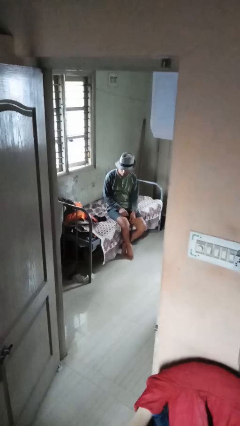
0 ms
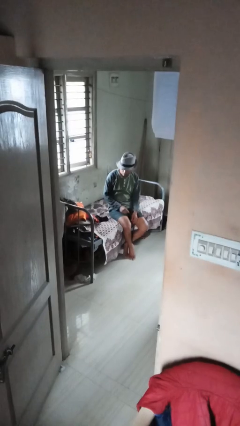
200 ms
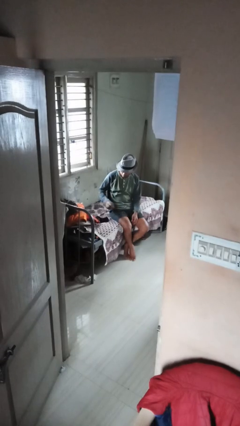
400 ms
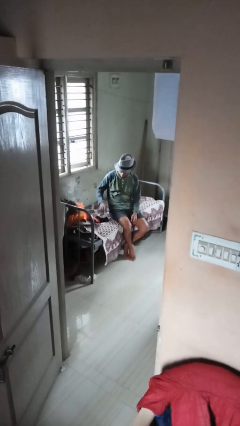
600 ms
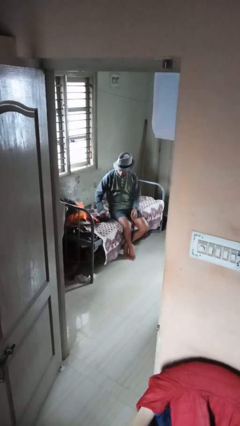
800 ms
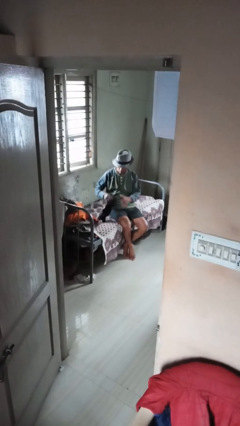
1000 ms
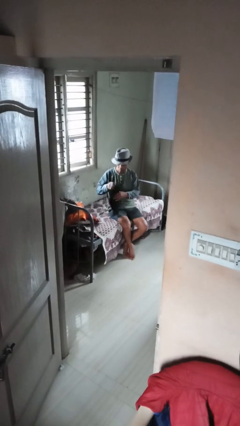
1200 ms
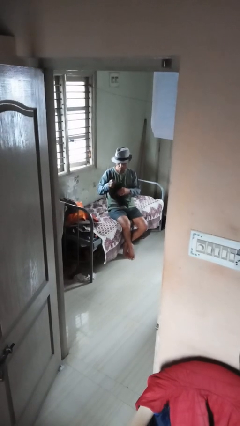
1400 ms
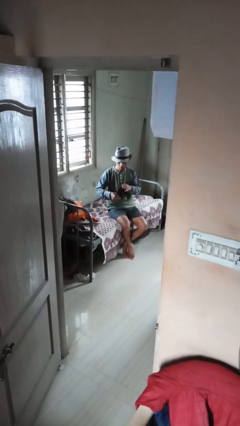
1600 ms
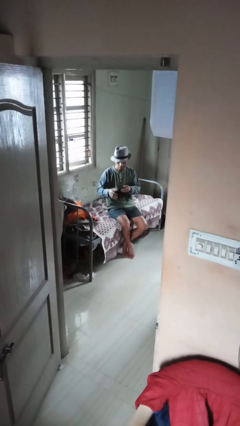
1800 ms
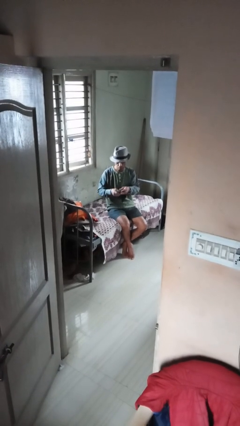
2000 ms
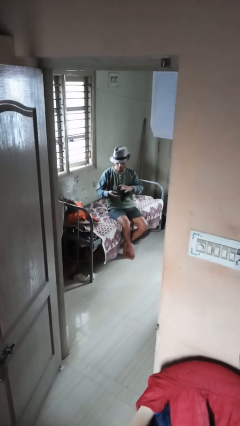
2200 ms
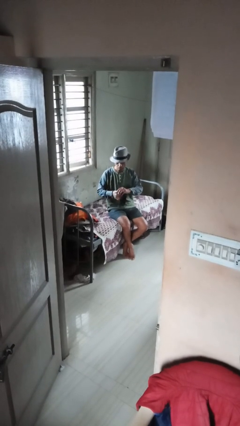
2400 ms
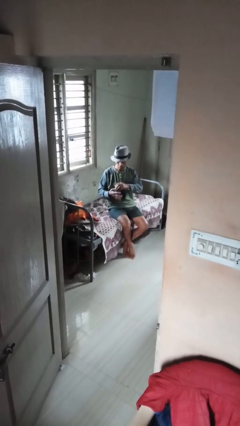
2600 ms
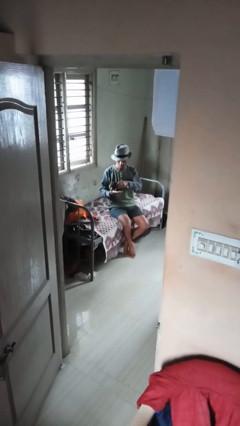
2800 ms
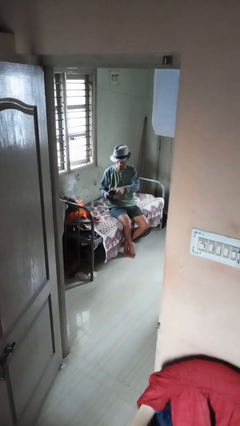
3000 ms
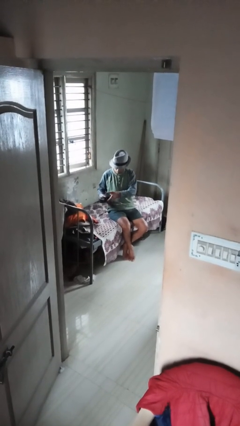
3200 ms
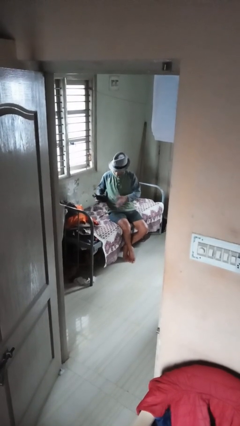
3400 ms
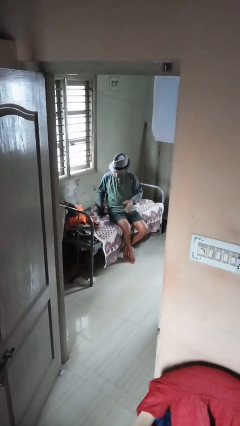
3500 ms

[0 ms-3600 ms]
person folds socks

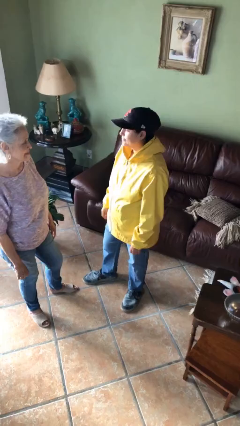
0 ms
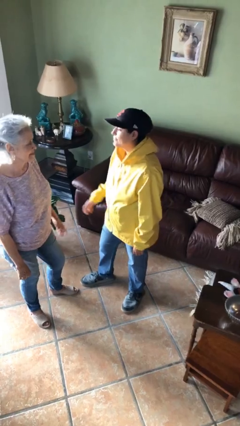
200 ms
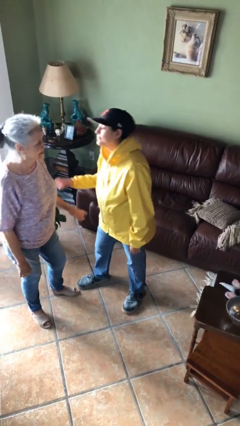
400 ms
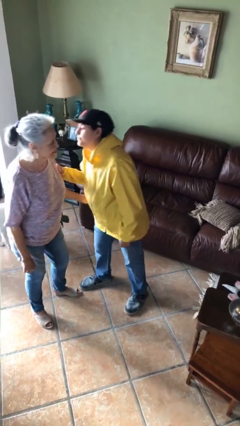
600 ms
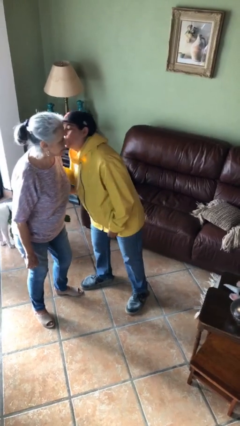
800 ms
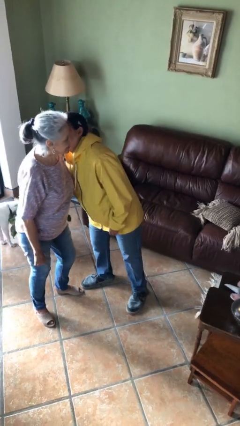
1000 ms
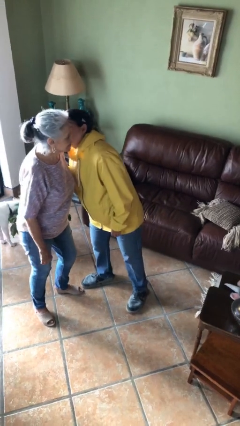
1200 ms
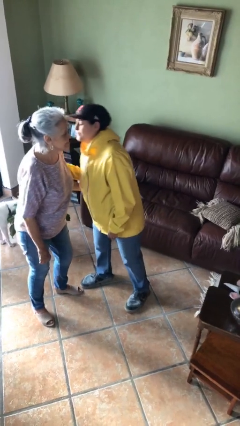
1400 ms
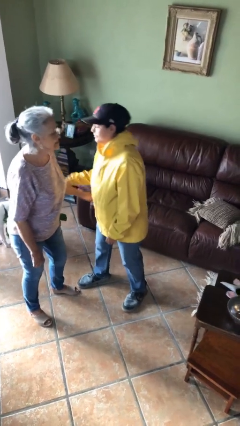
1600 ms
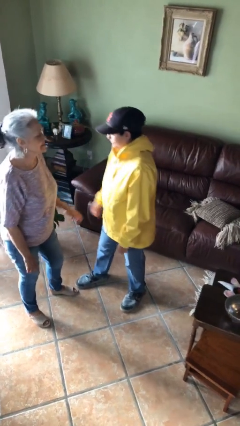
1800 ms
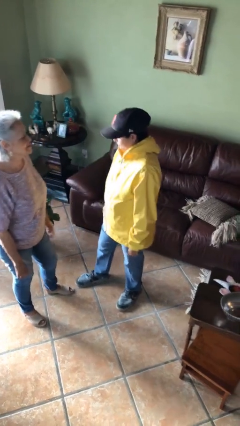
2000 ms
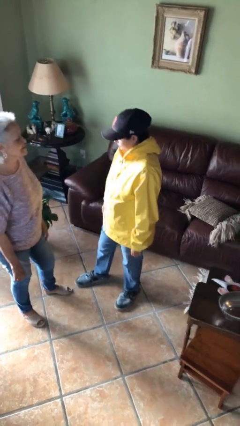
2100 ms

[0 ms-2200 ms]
person kisses cheek of person

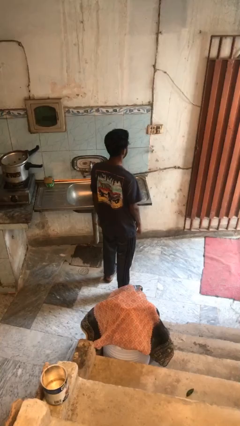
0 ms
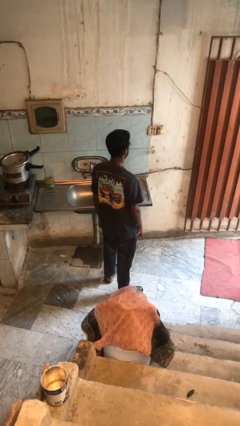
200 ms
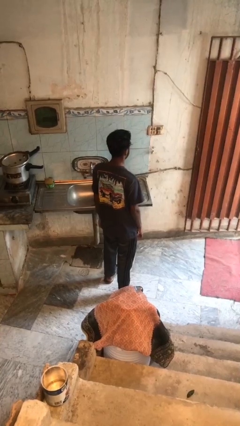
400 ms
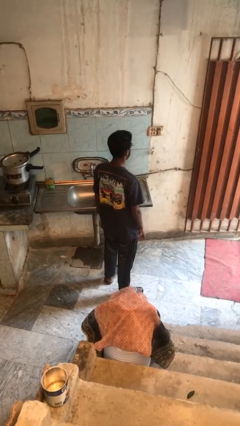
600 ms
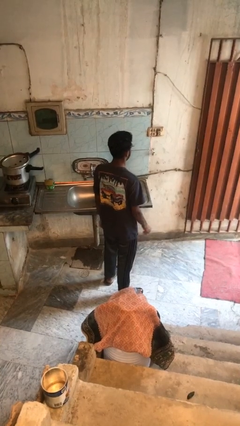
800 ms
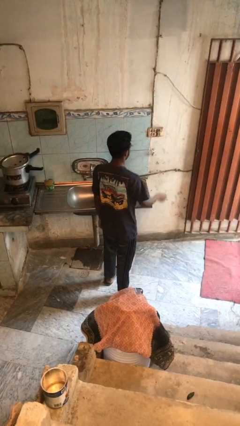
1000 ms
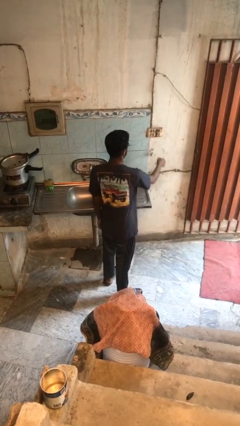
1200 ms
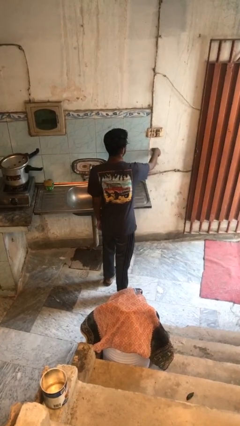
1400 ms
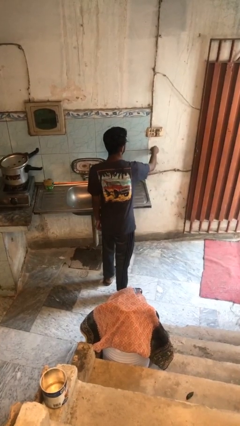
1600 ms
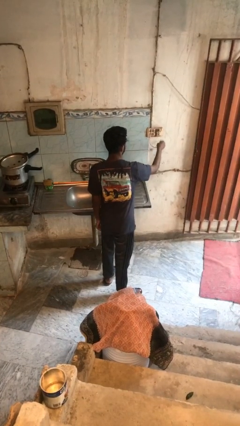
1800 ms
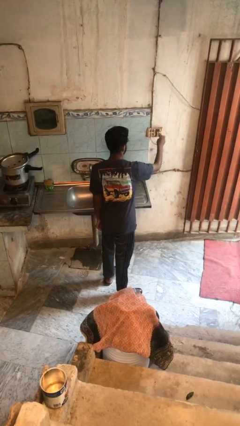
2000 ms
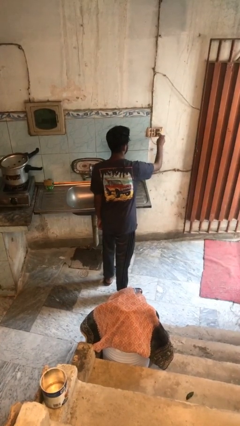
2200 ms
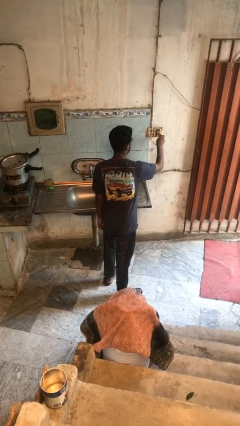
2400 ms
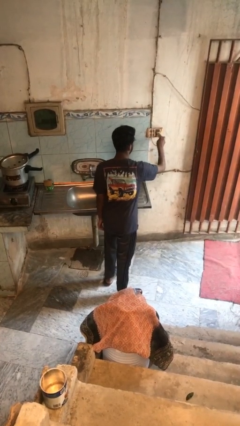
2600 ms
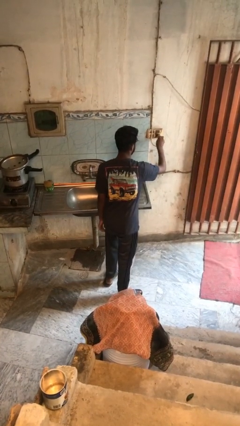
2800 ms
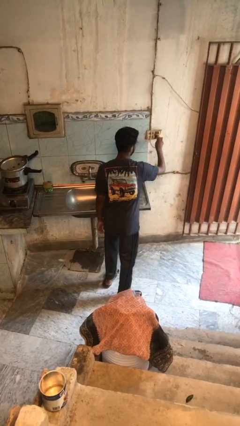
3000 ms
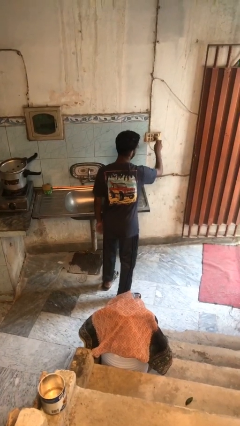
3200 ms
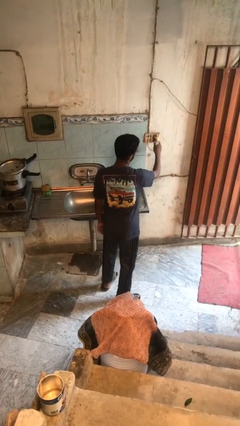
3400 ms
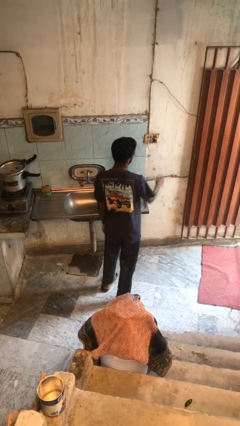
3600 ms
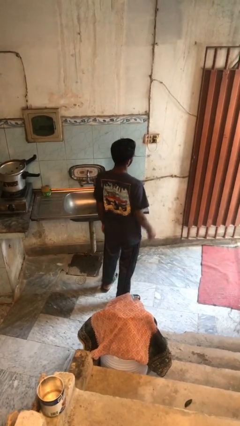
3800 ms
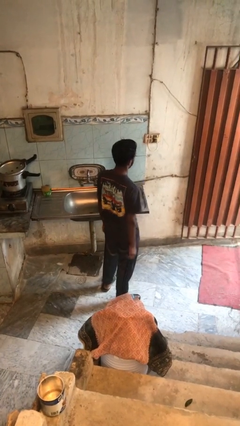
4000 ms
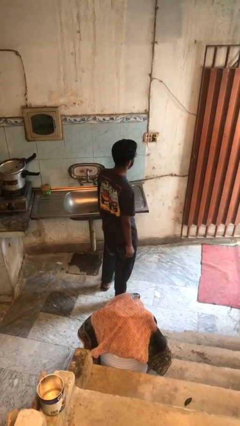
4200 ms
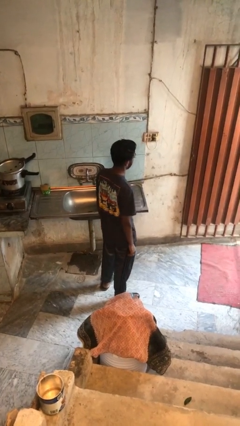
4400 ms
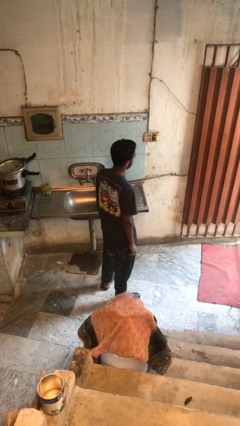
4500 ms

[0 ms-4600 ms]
person plugs into electrical socket

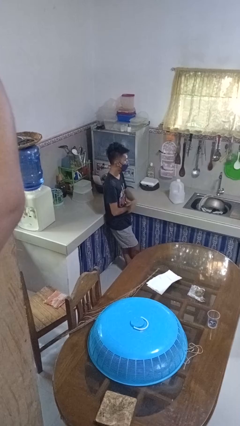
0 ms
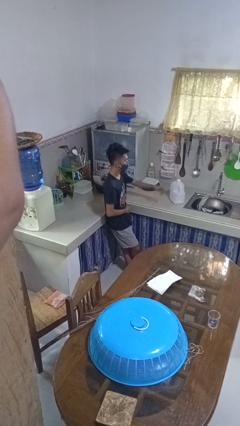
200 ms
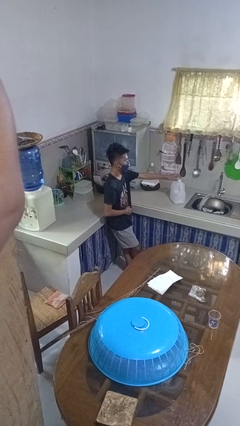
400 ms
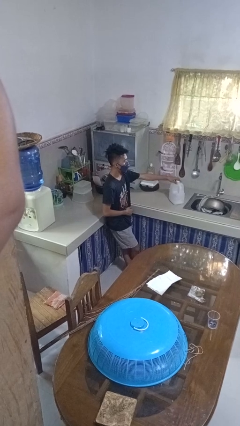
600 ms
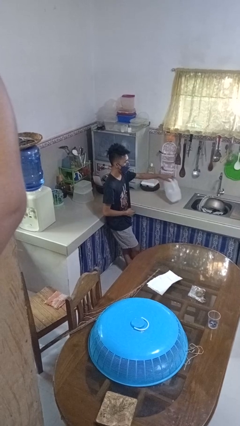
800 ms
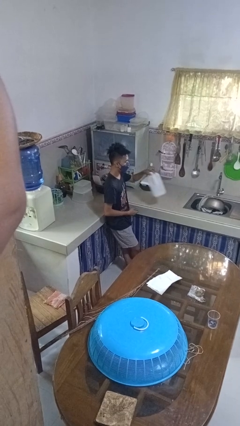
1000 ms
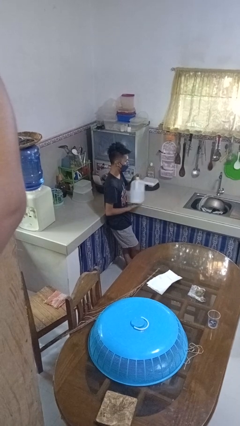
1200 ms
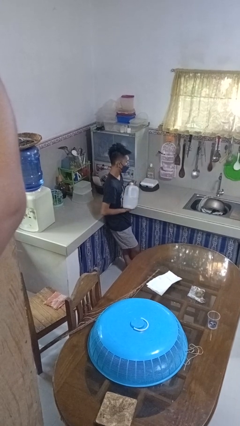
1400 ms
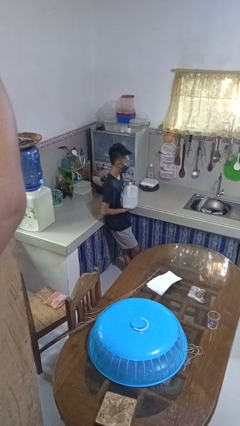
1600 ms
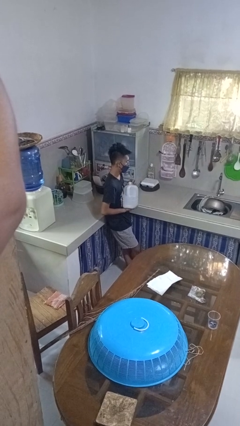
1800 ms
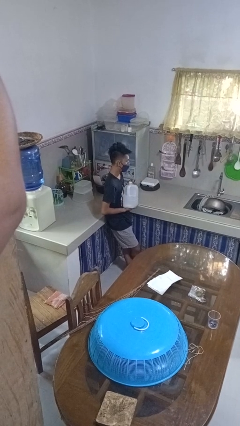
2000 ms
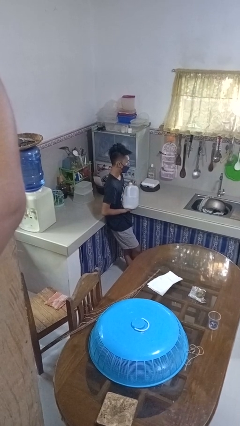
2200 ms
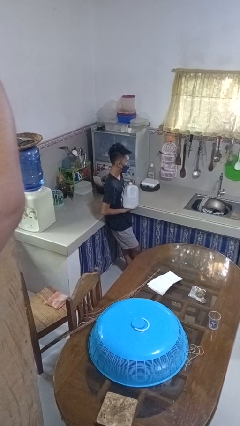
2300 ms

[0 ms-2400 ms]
person picks up object from countertop

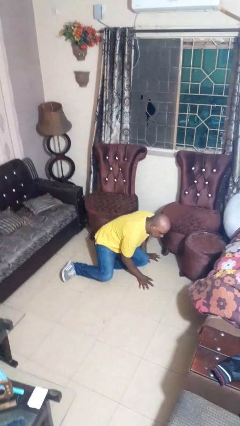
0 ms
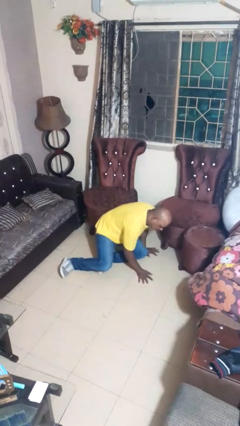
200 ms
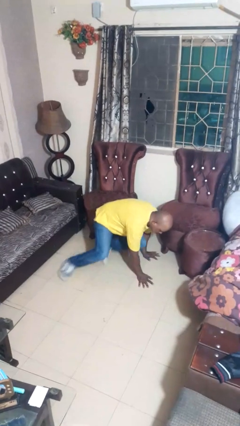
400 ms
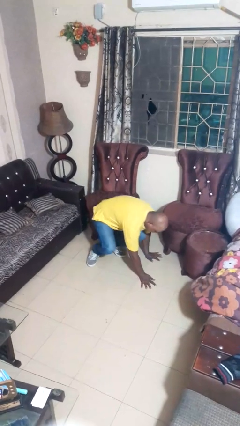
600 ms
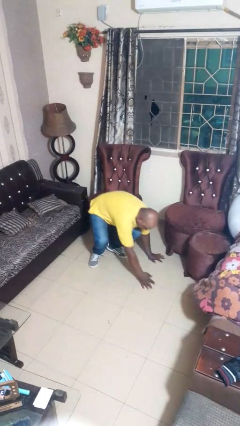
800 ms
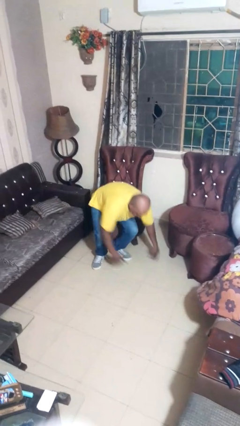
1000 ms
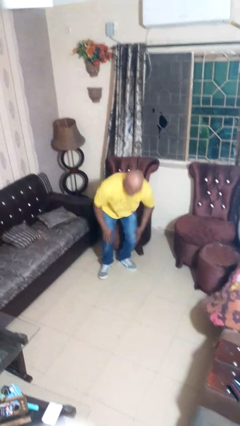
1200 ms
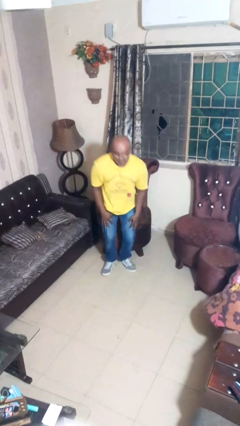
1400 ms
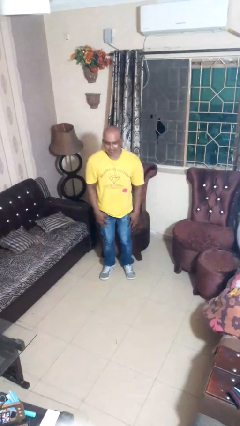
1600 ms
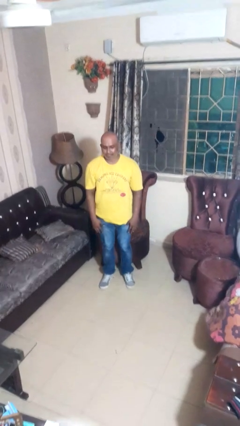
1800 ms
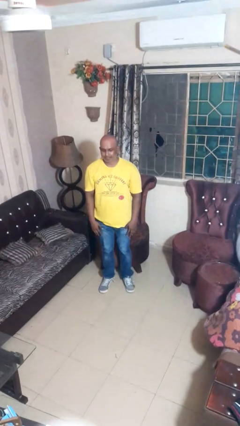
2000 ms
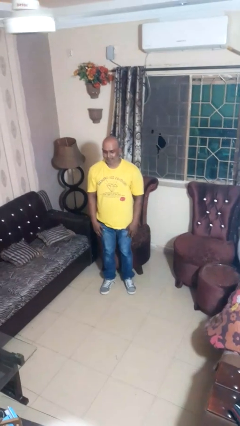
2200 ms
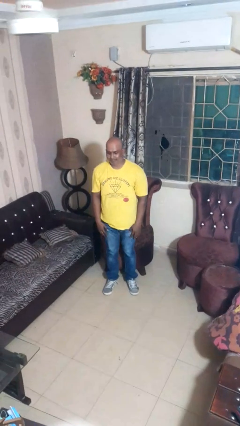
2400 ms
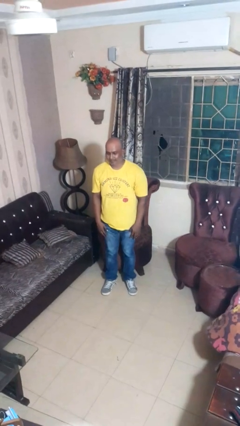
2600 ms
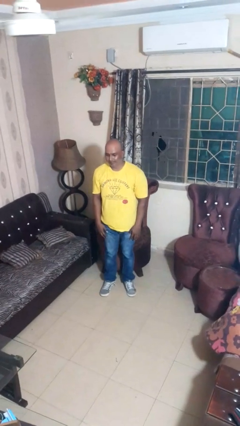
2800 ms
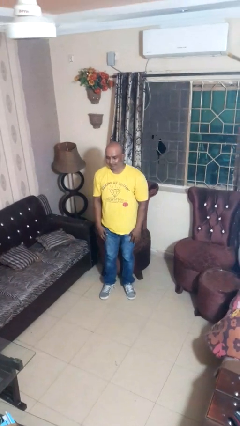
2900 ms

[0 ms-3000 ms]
person stands up from floor

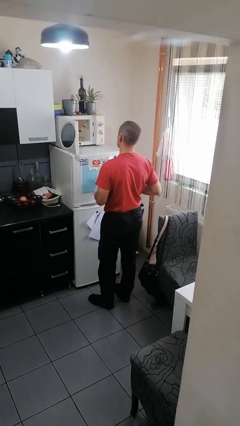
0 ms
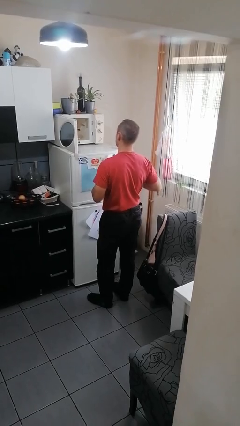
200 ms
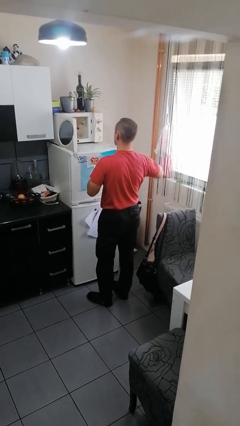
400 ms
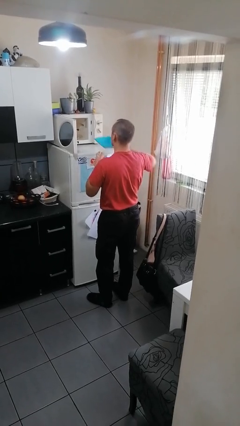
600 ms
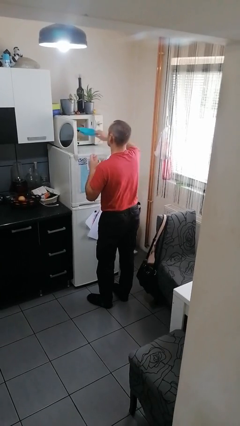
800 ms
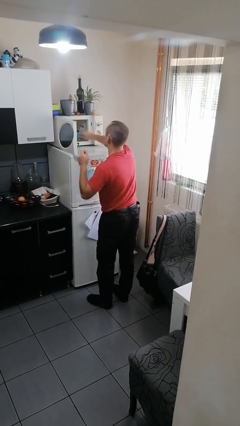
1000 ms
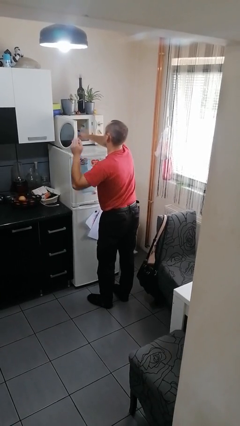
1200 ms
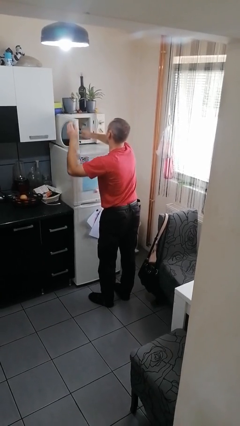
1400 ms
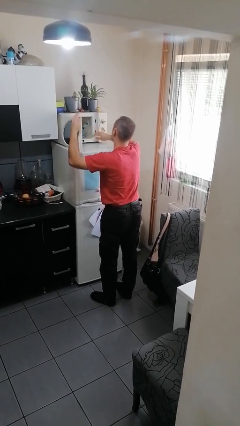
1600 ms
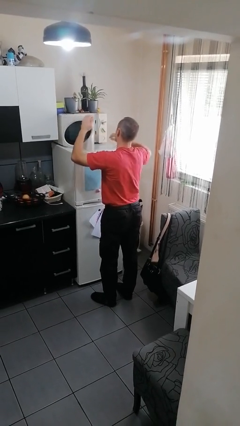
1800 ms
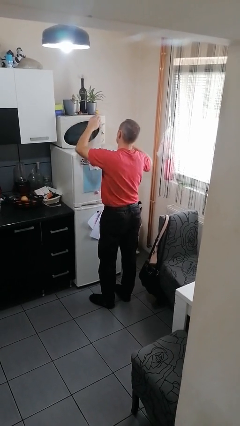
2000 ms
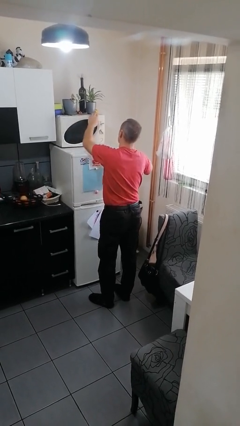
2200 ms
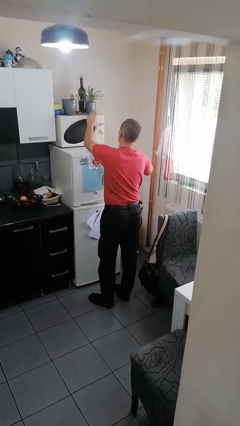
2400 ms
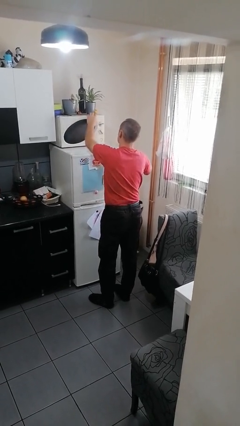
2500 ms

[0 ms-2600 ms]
person puts object into microwave
